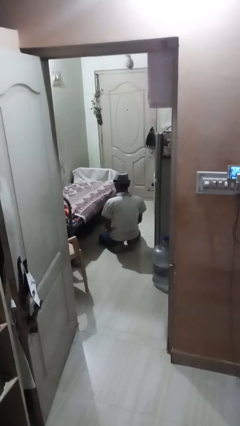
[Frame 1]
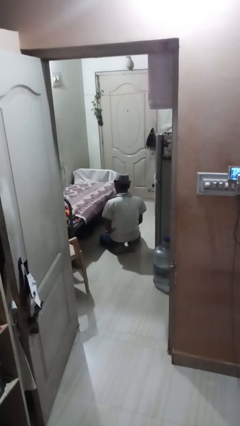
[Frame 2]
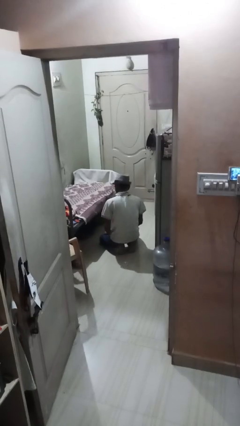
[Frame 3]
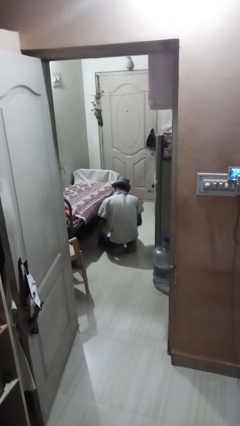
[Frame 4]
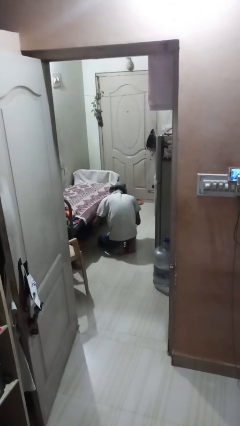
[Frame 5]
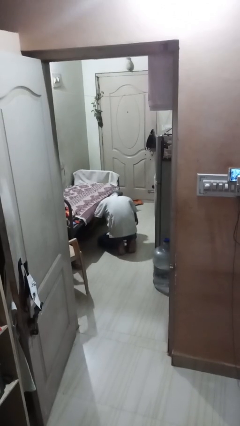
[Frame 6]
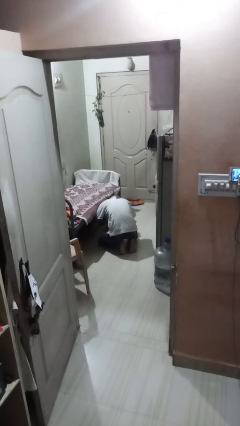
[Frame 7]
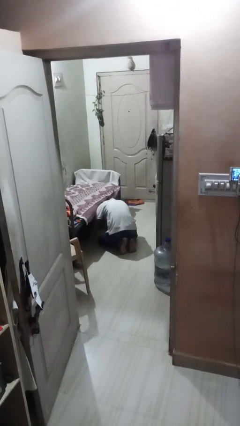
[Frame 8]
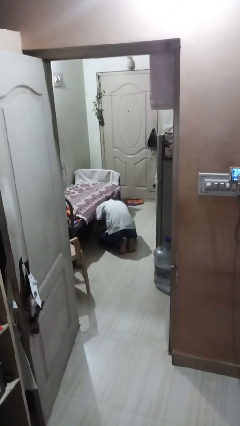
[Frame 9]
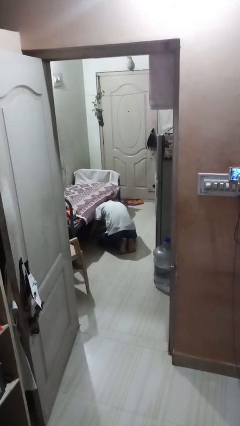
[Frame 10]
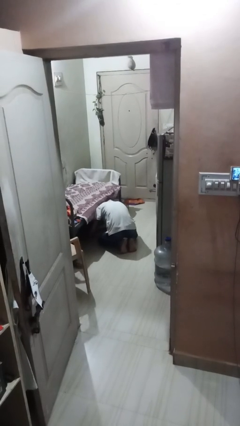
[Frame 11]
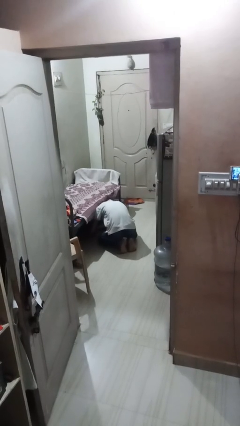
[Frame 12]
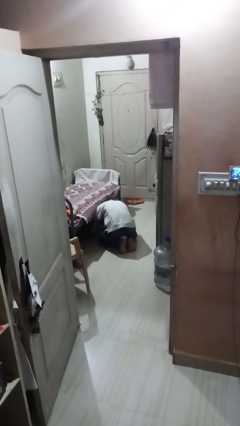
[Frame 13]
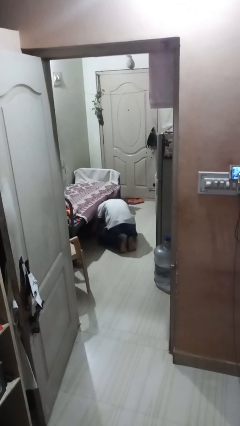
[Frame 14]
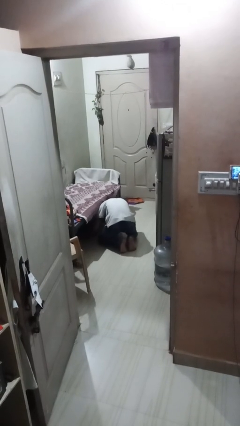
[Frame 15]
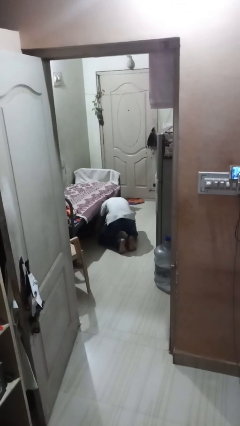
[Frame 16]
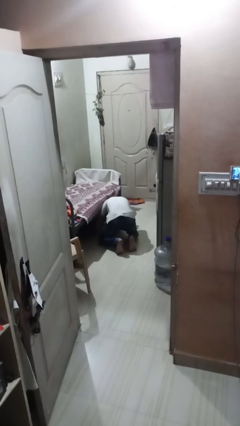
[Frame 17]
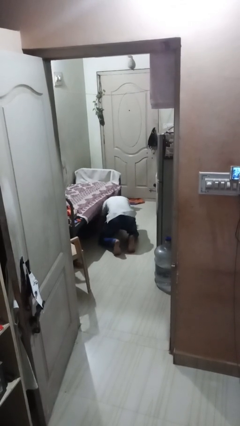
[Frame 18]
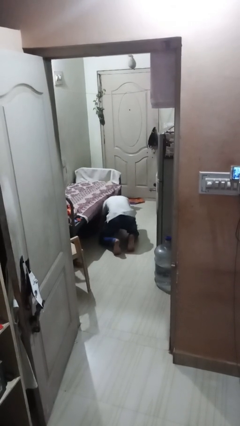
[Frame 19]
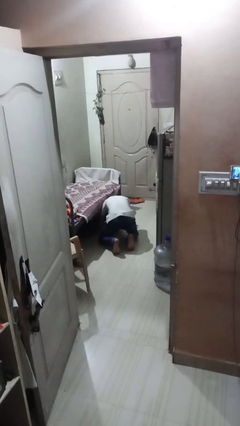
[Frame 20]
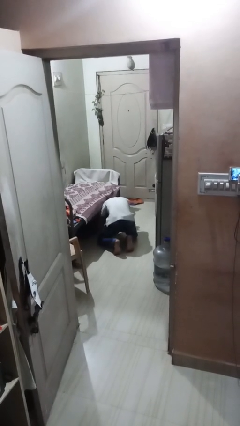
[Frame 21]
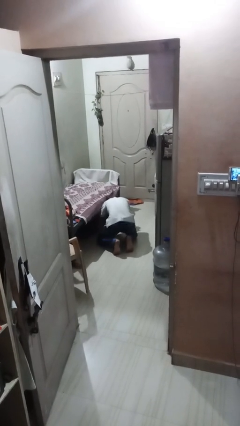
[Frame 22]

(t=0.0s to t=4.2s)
person searches under bed

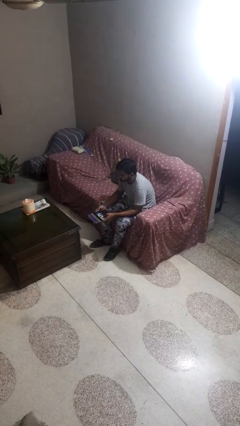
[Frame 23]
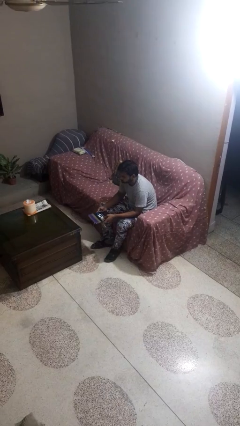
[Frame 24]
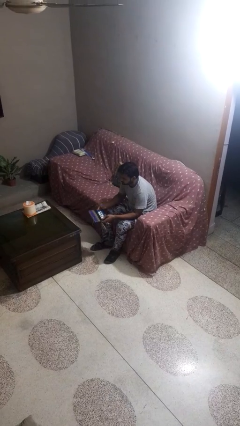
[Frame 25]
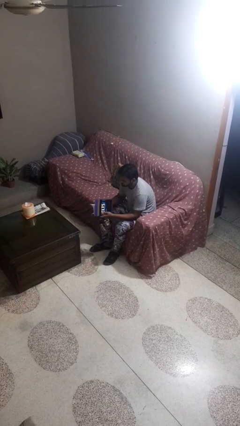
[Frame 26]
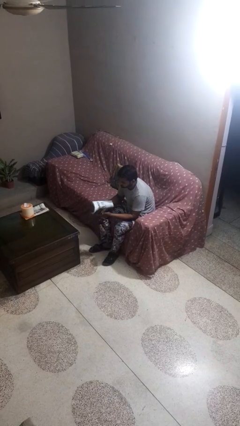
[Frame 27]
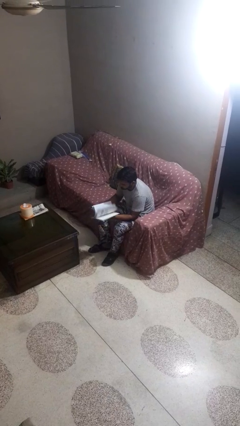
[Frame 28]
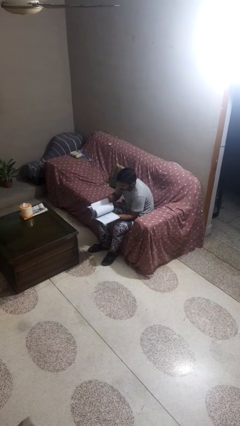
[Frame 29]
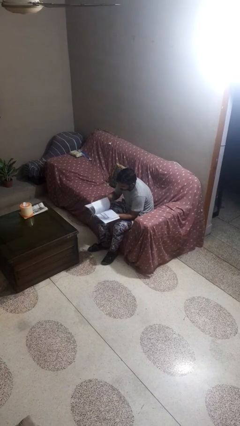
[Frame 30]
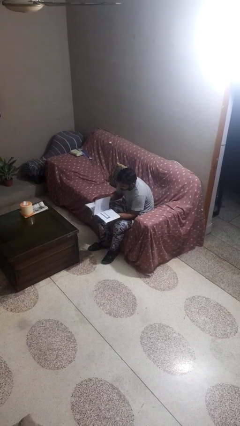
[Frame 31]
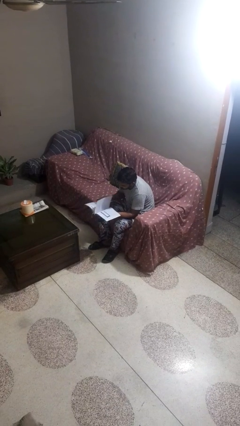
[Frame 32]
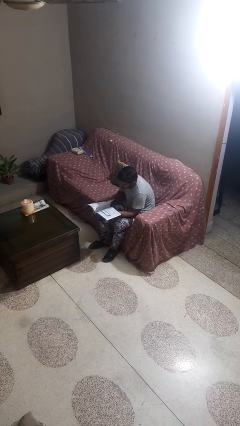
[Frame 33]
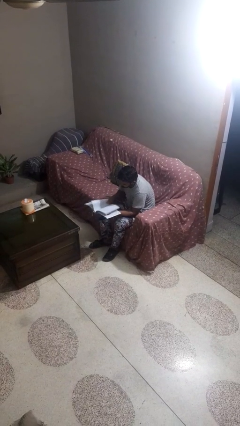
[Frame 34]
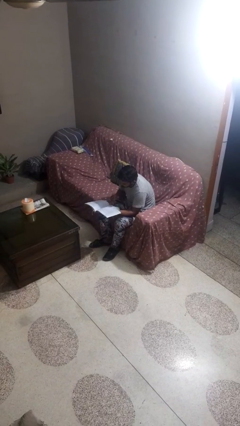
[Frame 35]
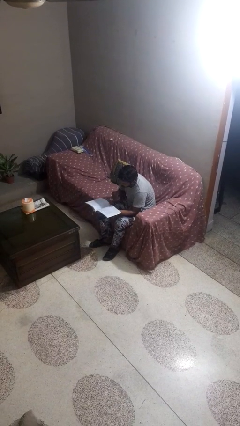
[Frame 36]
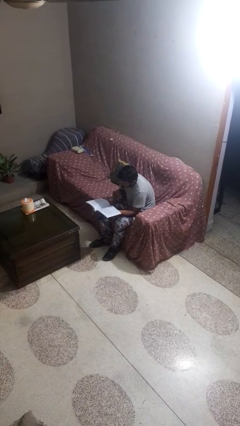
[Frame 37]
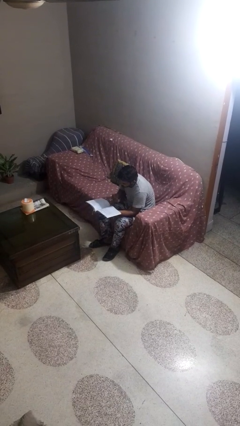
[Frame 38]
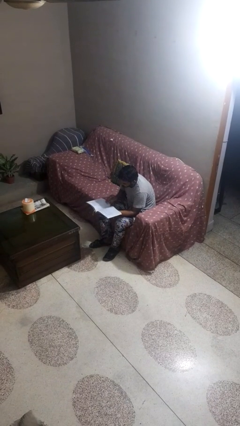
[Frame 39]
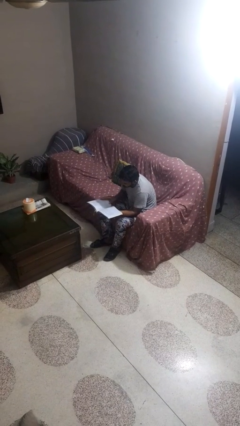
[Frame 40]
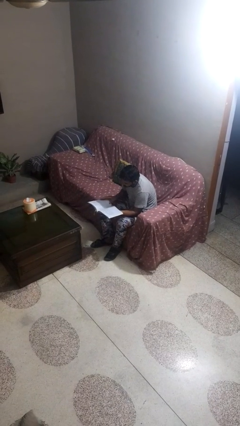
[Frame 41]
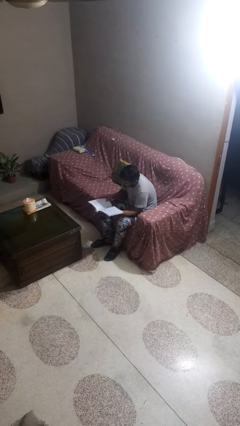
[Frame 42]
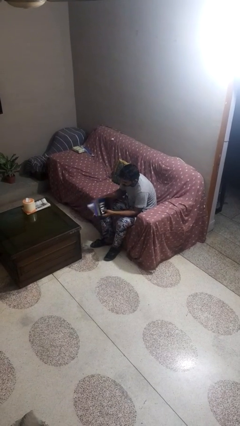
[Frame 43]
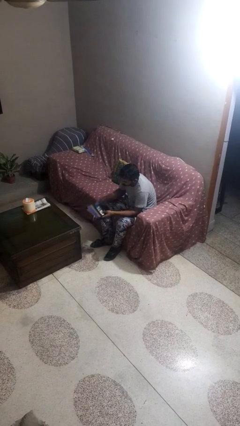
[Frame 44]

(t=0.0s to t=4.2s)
person reads book

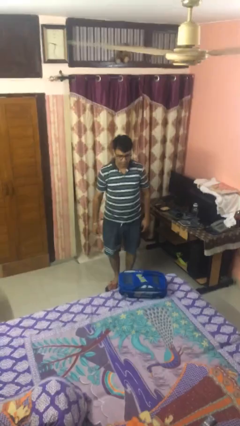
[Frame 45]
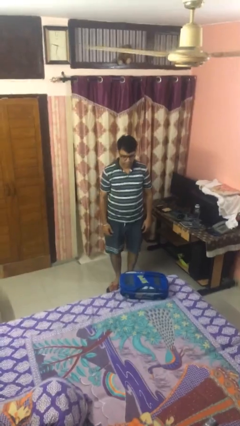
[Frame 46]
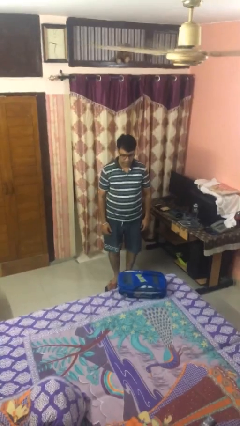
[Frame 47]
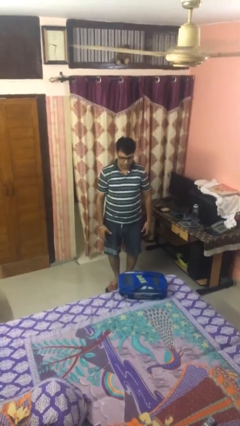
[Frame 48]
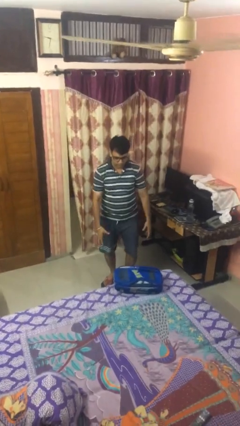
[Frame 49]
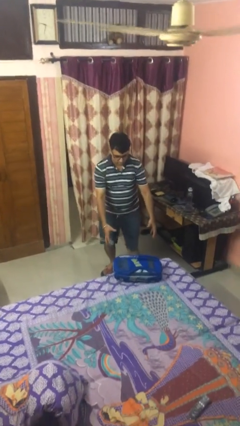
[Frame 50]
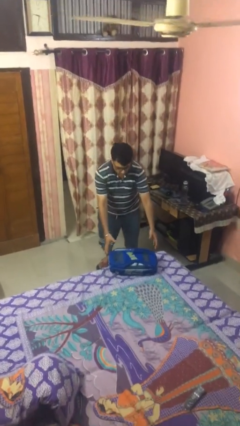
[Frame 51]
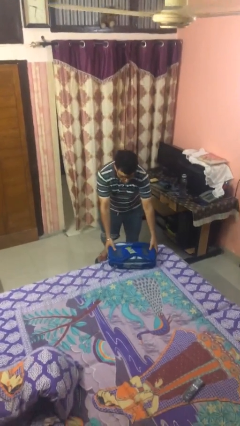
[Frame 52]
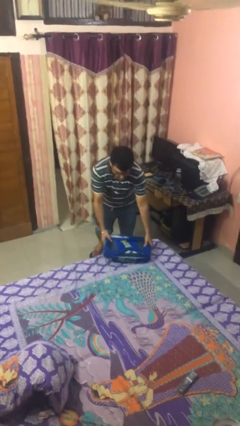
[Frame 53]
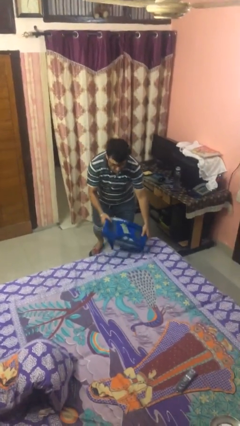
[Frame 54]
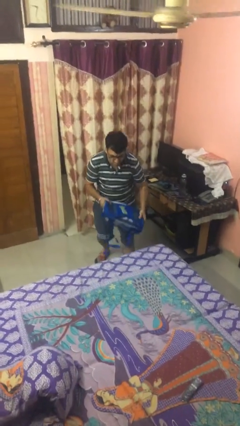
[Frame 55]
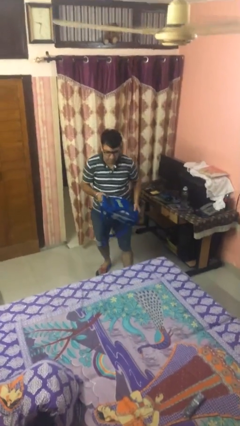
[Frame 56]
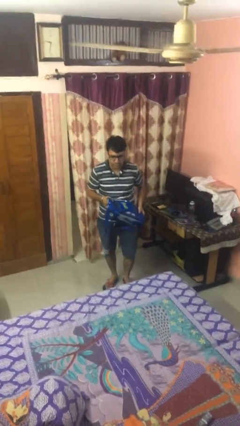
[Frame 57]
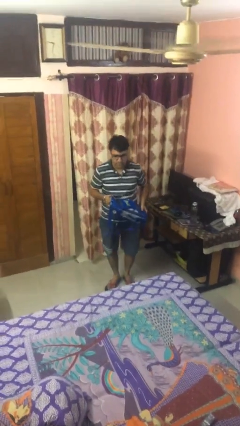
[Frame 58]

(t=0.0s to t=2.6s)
person picks up object from bed

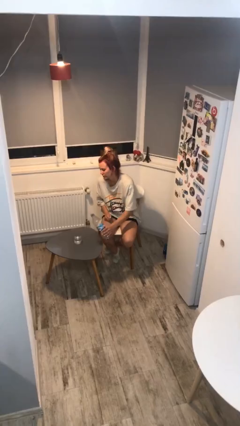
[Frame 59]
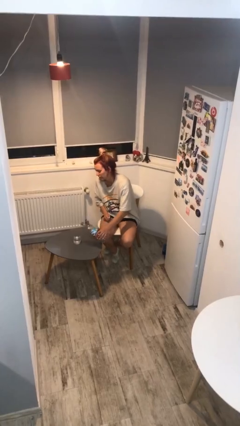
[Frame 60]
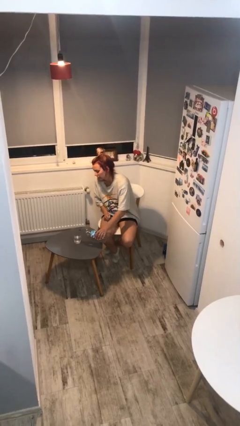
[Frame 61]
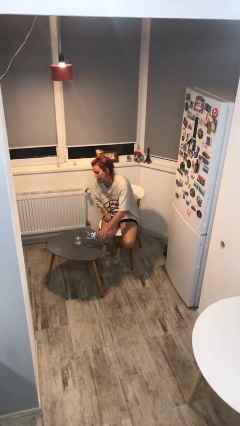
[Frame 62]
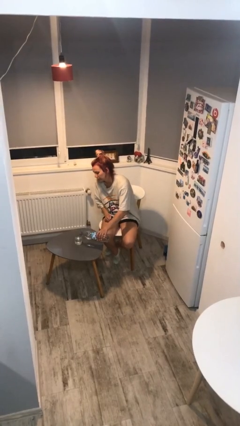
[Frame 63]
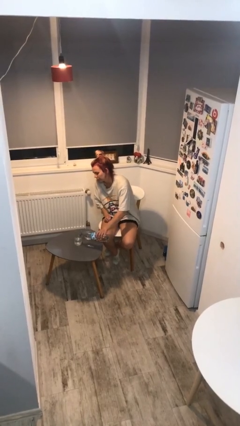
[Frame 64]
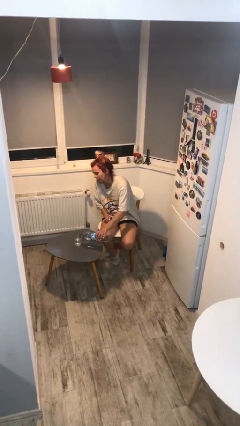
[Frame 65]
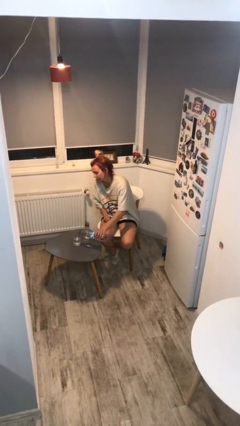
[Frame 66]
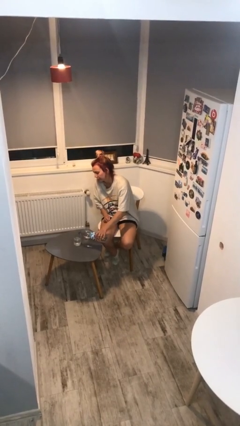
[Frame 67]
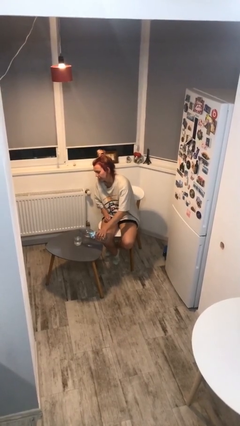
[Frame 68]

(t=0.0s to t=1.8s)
person pours liquid into cup

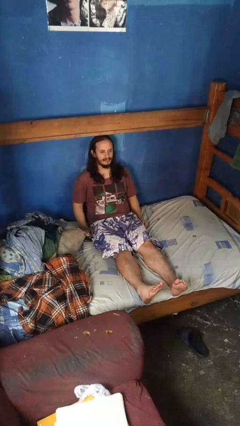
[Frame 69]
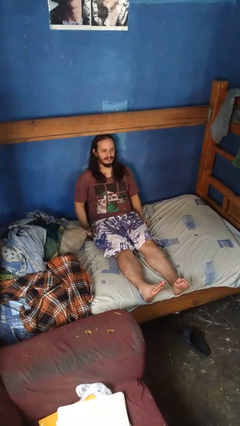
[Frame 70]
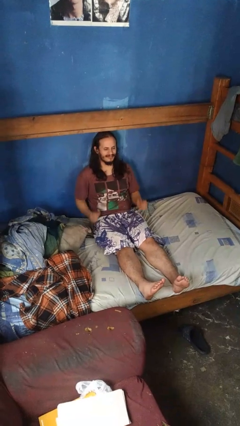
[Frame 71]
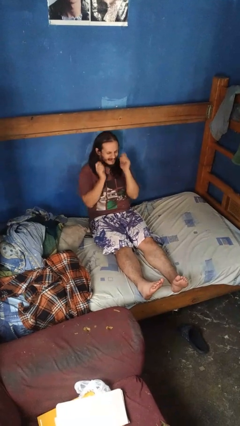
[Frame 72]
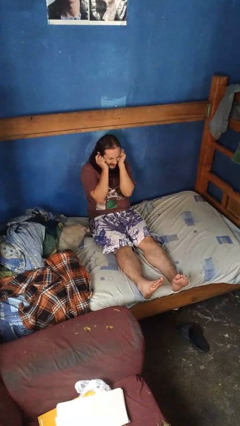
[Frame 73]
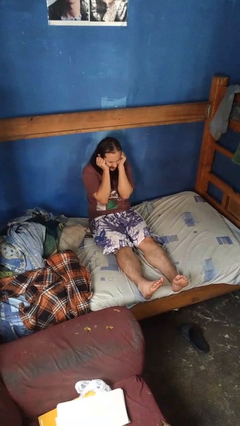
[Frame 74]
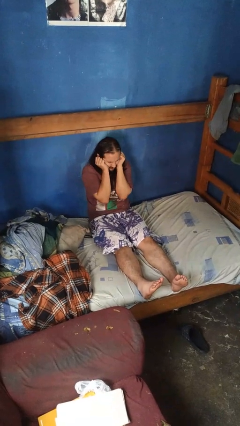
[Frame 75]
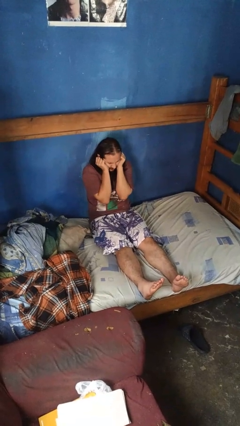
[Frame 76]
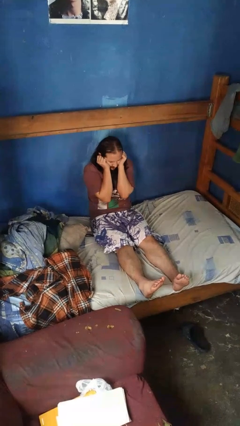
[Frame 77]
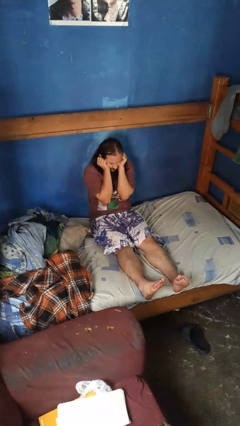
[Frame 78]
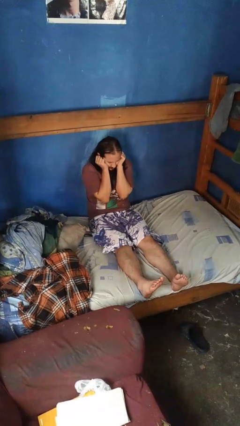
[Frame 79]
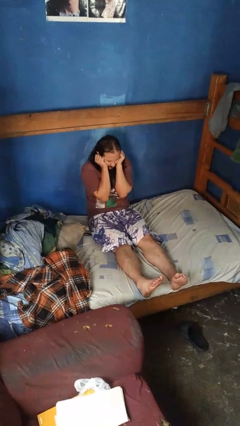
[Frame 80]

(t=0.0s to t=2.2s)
person puts fingers in ear

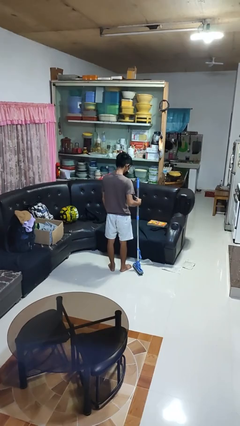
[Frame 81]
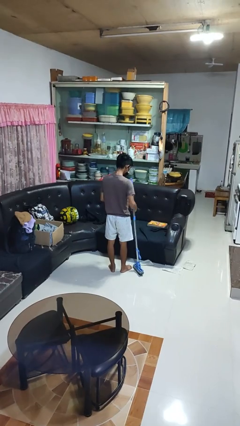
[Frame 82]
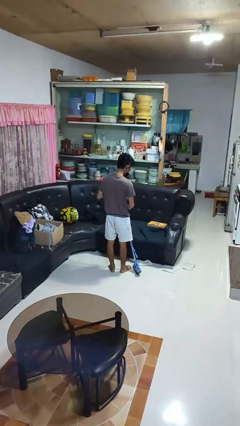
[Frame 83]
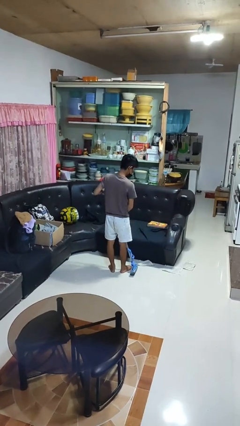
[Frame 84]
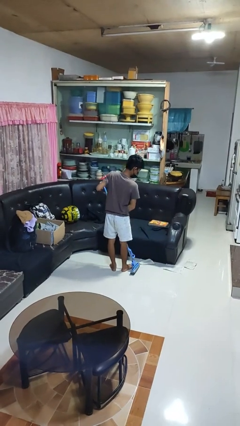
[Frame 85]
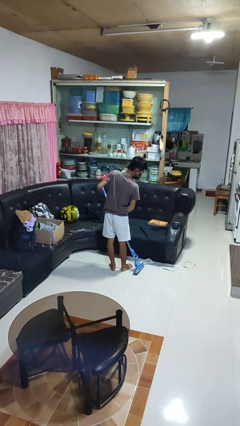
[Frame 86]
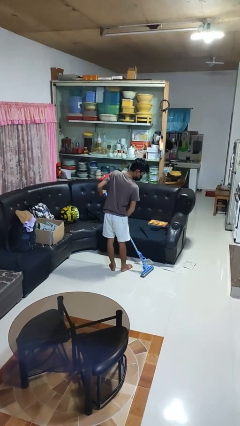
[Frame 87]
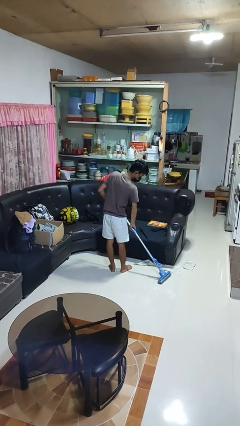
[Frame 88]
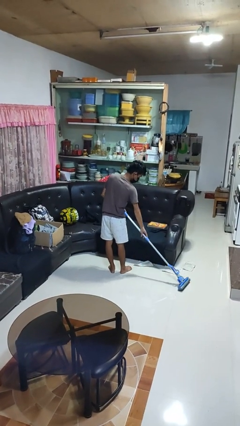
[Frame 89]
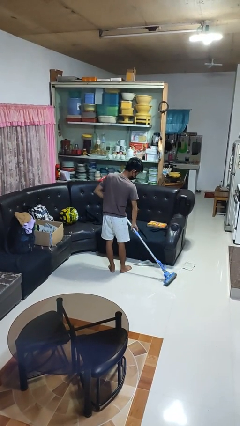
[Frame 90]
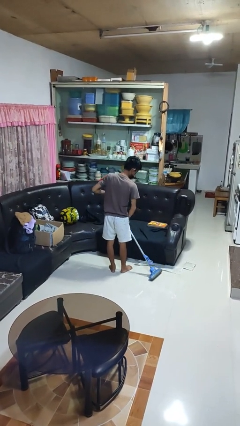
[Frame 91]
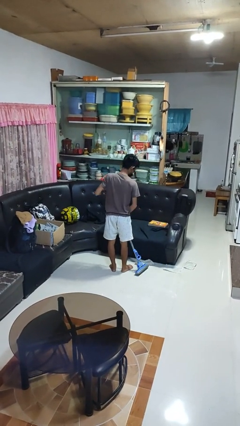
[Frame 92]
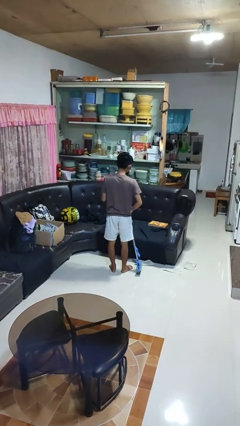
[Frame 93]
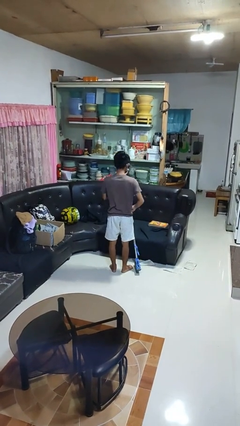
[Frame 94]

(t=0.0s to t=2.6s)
person mops
